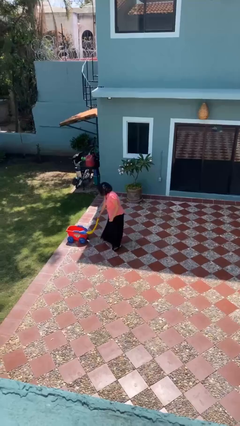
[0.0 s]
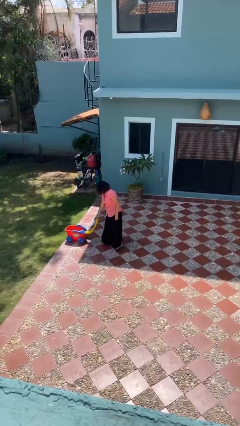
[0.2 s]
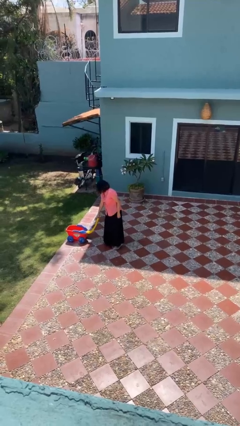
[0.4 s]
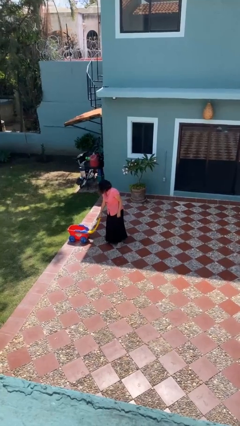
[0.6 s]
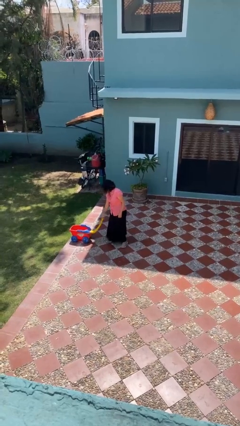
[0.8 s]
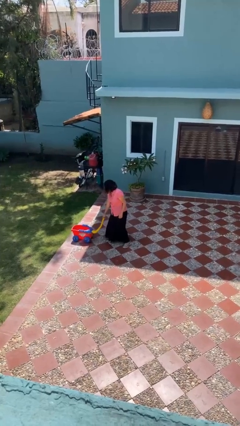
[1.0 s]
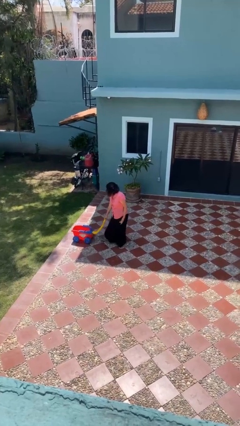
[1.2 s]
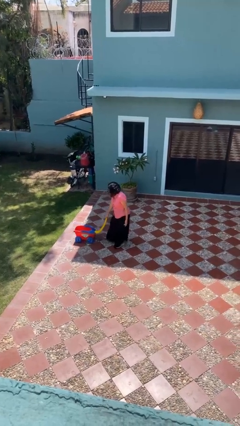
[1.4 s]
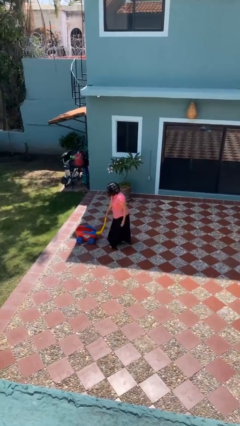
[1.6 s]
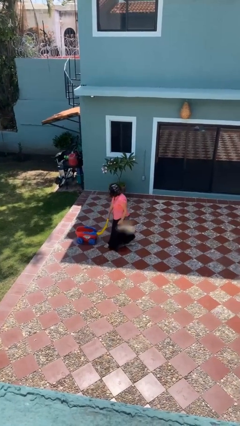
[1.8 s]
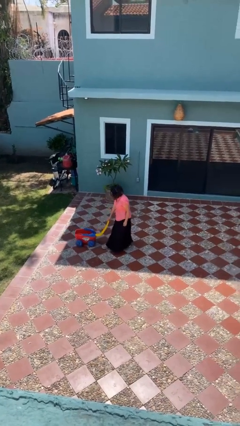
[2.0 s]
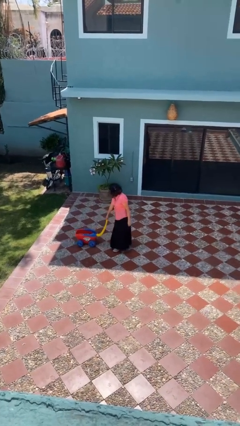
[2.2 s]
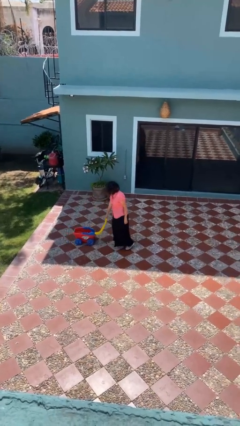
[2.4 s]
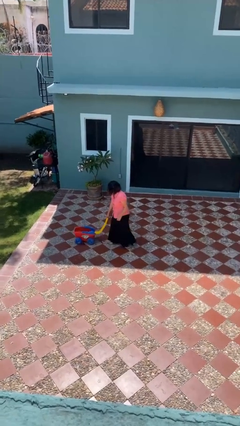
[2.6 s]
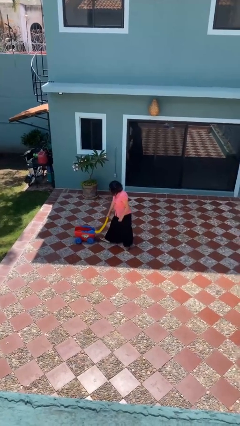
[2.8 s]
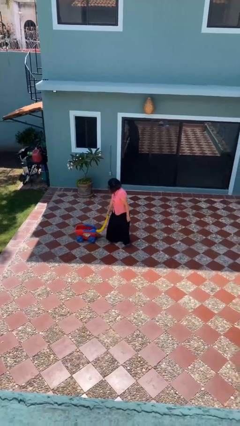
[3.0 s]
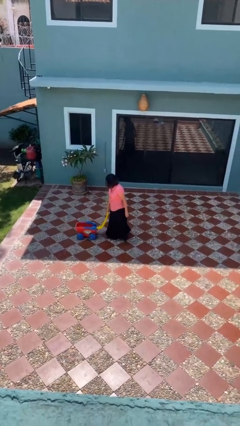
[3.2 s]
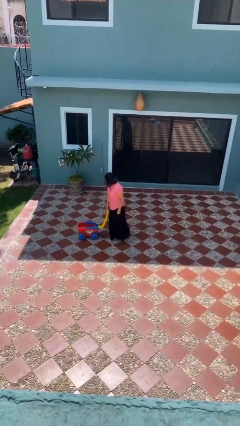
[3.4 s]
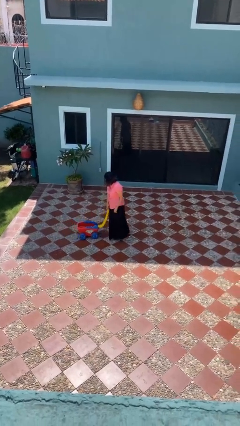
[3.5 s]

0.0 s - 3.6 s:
person pulls wheeled cart

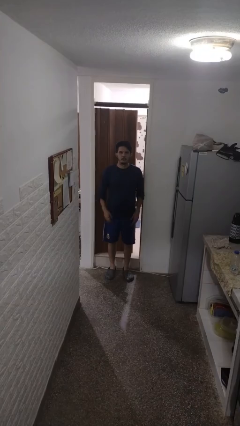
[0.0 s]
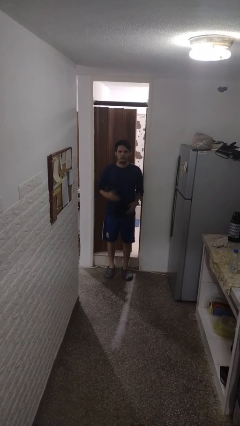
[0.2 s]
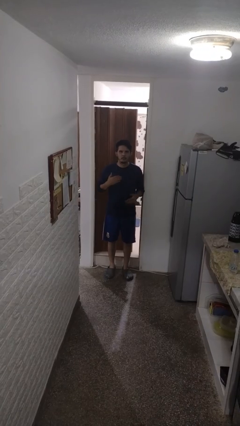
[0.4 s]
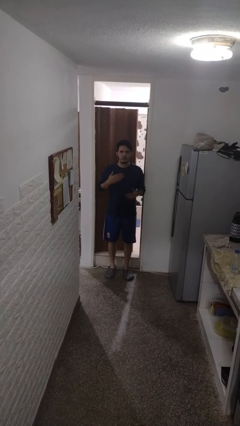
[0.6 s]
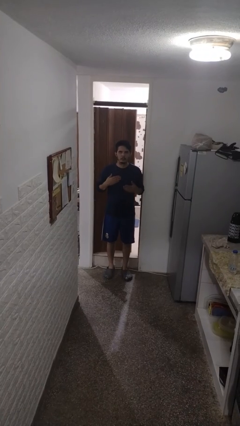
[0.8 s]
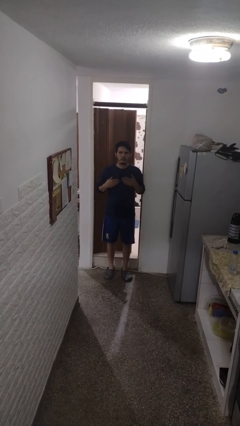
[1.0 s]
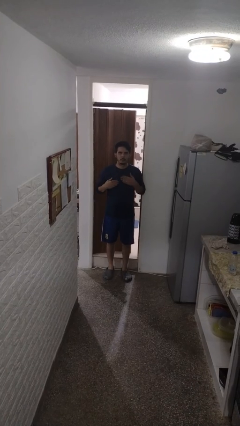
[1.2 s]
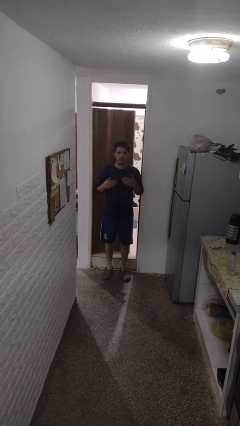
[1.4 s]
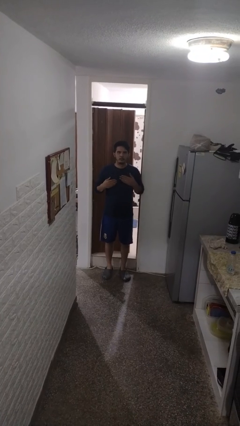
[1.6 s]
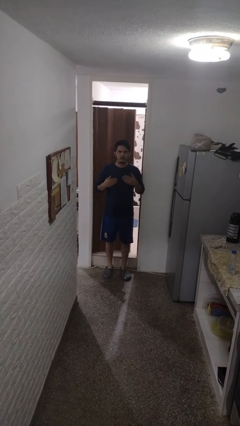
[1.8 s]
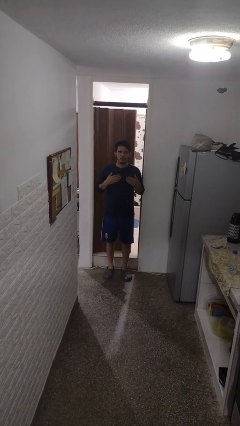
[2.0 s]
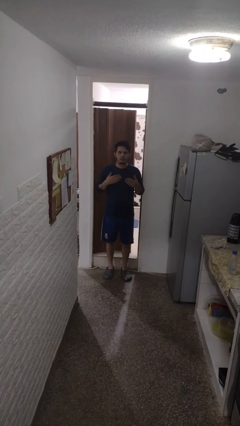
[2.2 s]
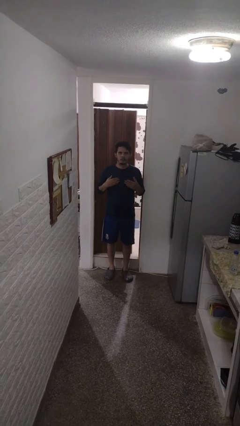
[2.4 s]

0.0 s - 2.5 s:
person drums on chest

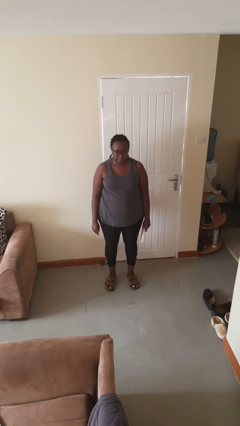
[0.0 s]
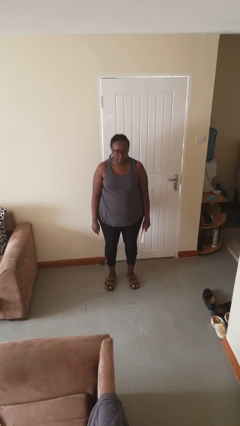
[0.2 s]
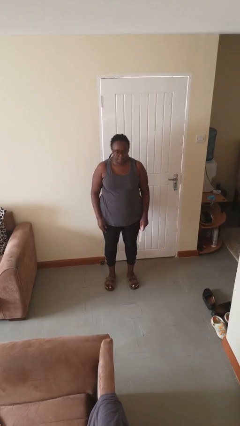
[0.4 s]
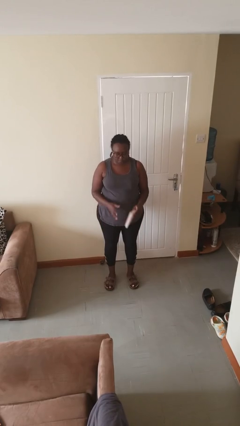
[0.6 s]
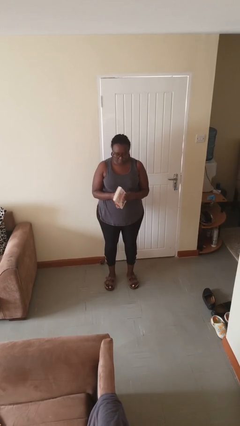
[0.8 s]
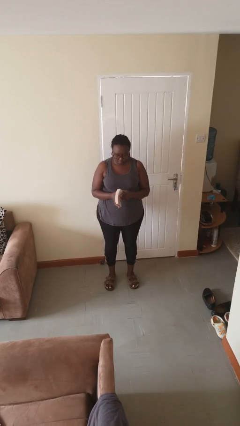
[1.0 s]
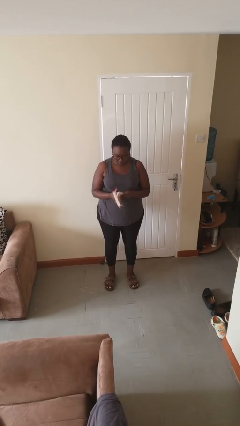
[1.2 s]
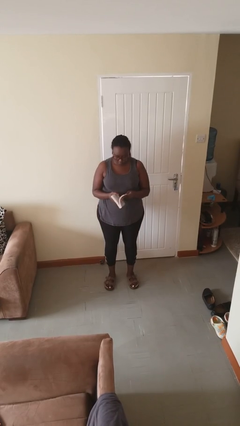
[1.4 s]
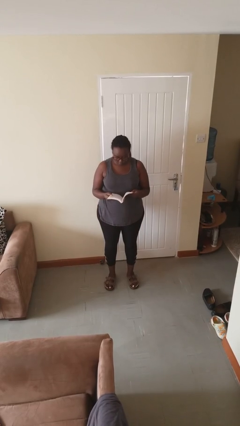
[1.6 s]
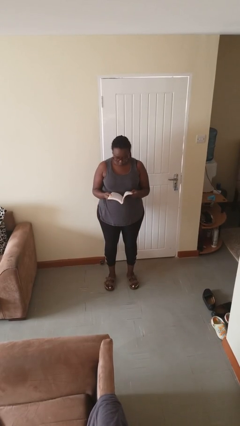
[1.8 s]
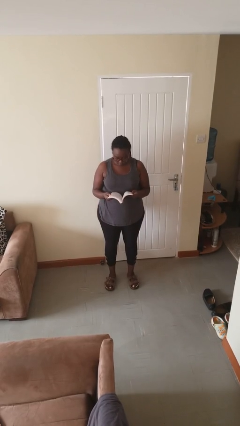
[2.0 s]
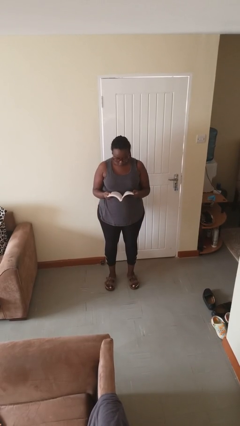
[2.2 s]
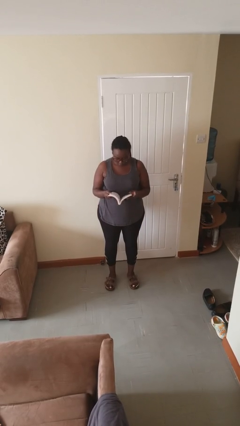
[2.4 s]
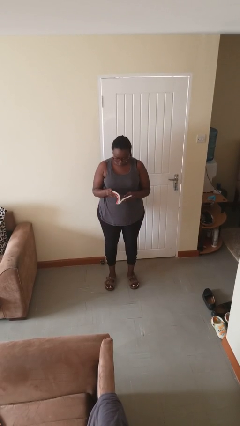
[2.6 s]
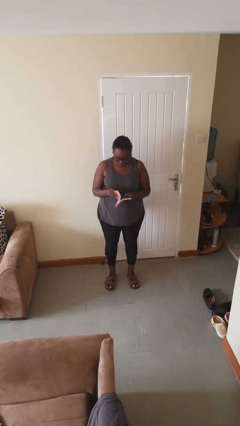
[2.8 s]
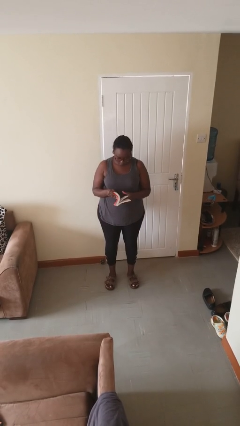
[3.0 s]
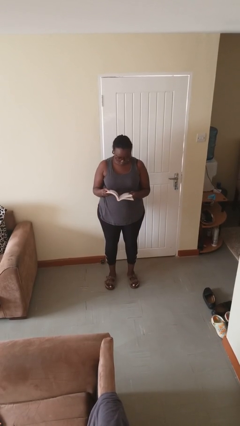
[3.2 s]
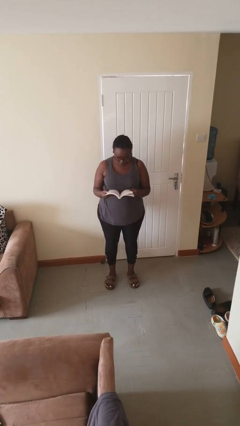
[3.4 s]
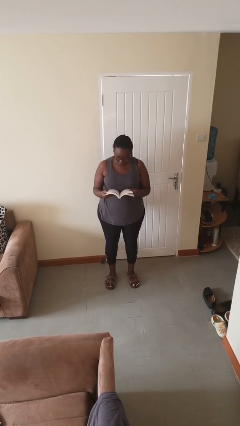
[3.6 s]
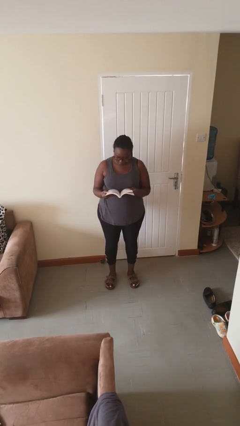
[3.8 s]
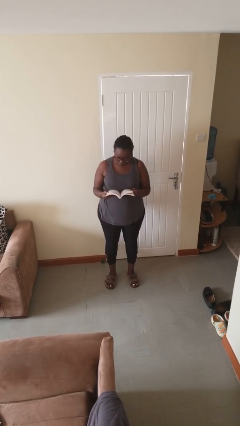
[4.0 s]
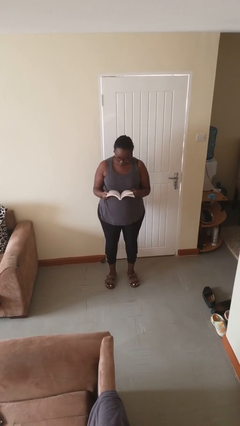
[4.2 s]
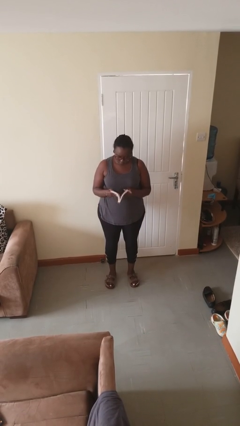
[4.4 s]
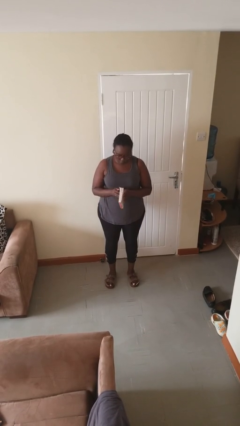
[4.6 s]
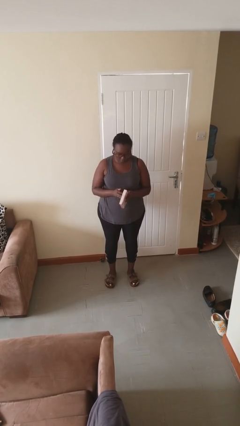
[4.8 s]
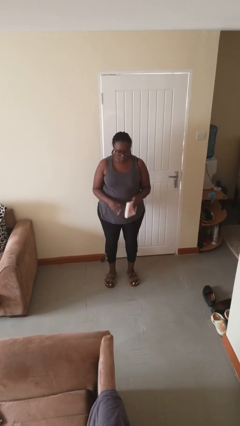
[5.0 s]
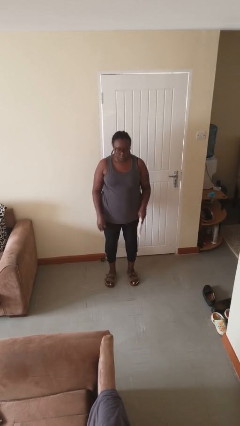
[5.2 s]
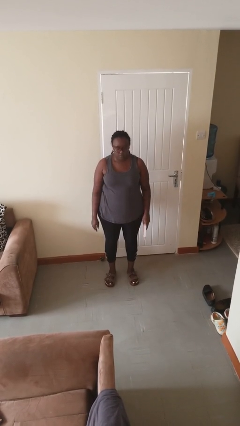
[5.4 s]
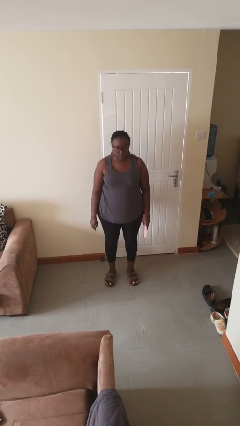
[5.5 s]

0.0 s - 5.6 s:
person reads book

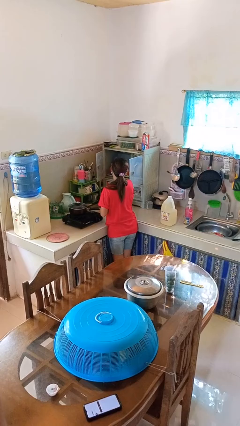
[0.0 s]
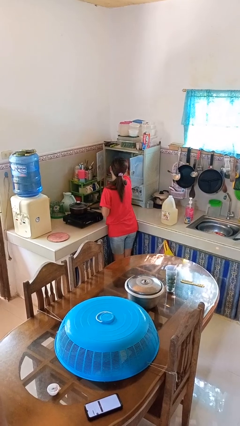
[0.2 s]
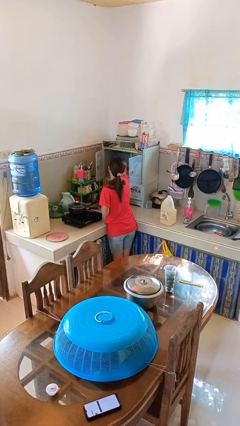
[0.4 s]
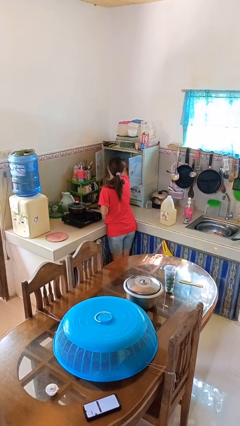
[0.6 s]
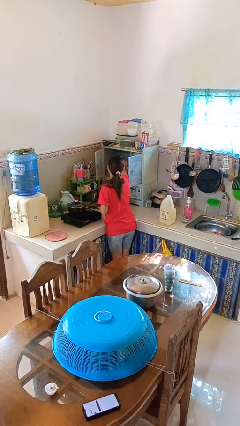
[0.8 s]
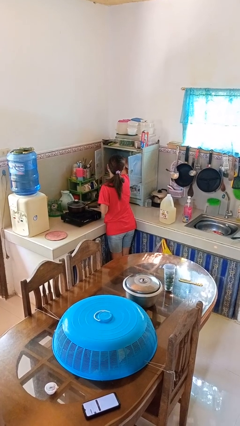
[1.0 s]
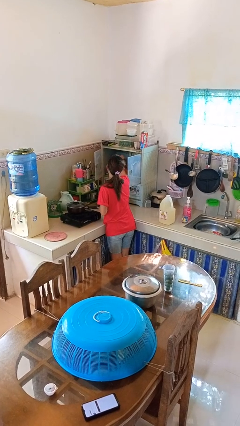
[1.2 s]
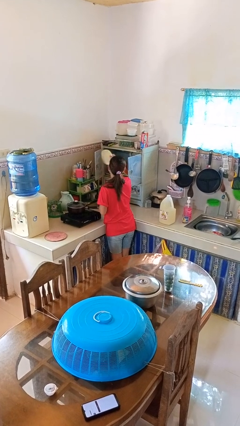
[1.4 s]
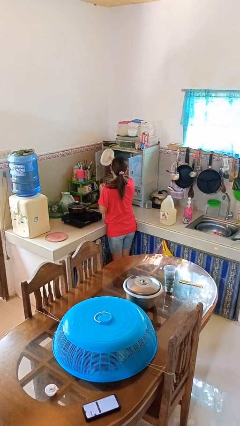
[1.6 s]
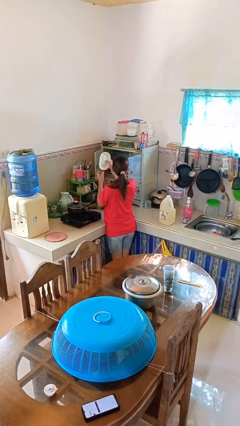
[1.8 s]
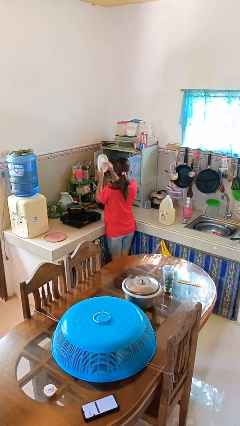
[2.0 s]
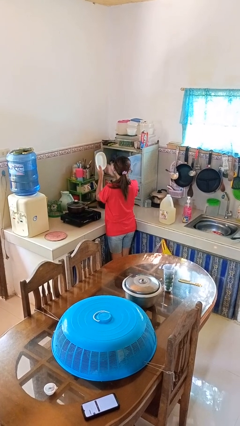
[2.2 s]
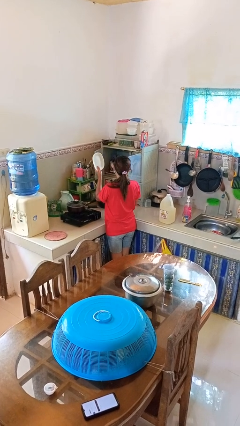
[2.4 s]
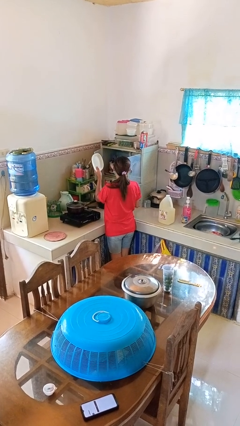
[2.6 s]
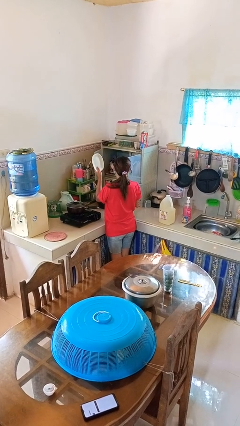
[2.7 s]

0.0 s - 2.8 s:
person takes object from cabinet

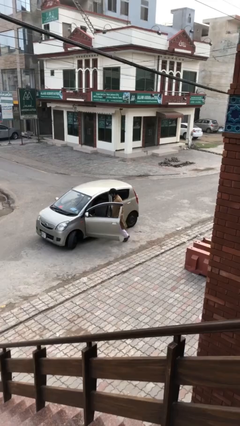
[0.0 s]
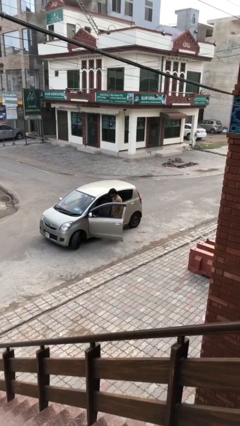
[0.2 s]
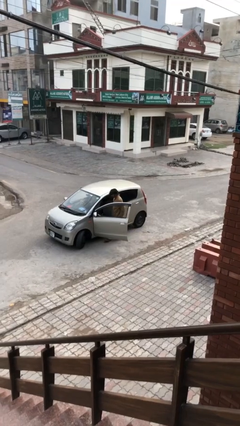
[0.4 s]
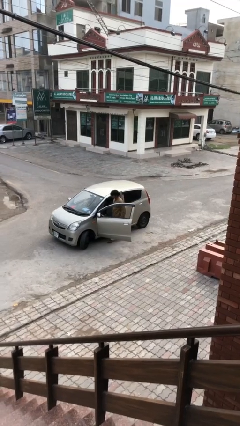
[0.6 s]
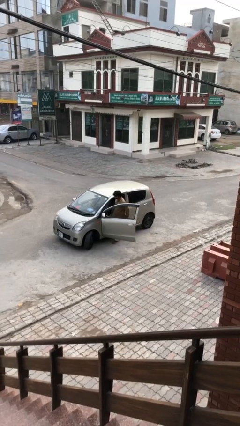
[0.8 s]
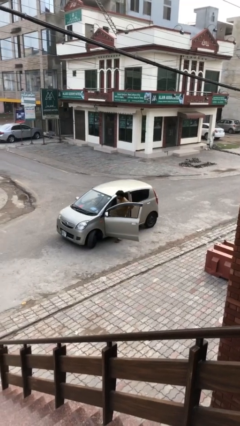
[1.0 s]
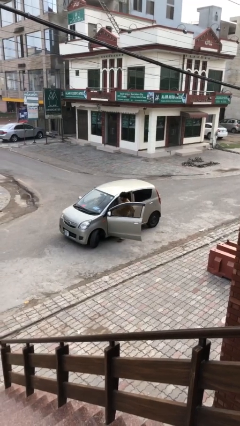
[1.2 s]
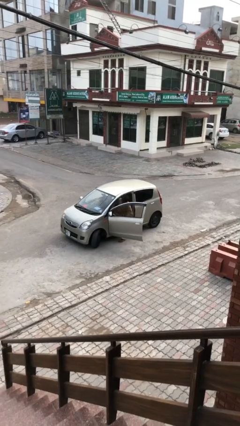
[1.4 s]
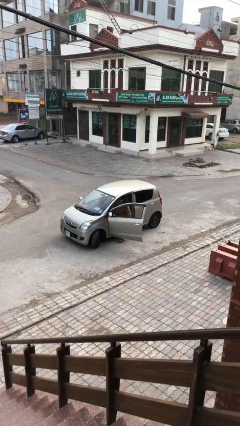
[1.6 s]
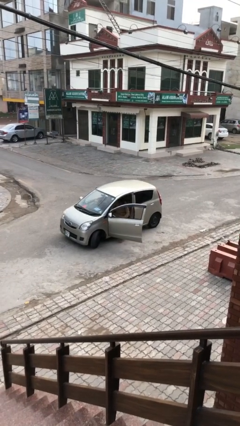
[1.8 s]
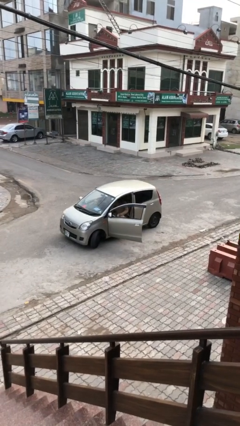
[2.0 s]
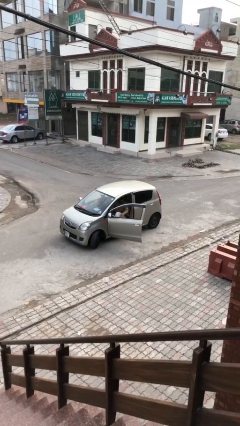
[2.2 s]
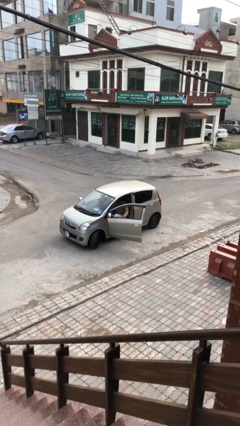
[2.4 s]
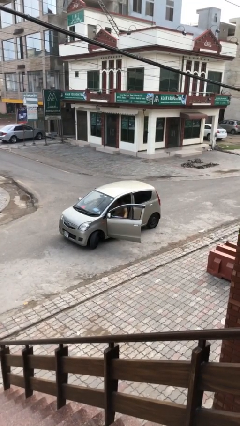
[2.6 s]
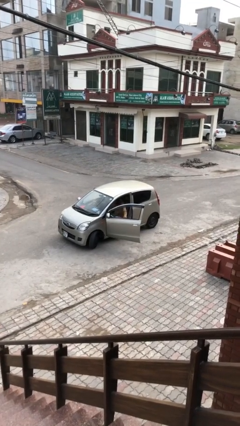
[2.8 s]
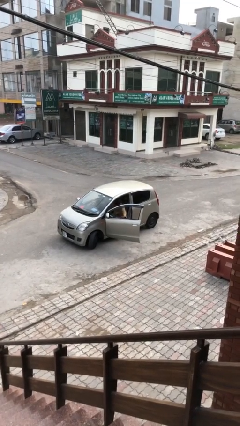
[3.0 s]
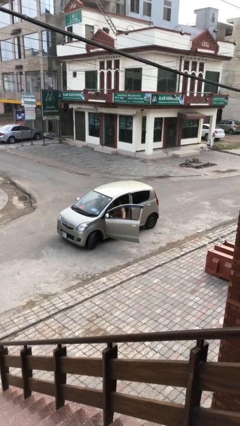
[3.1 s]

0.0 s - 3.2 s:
person enters car
